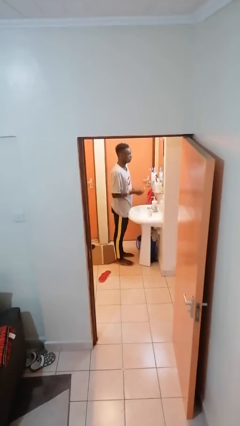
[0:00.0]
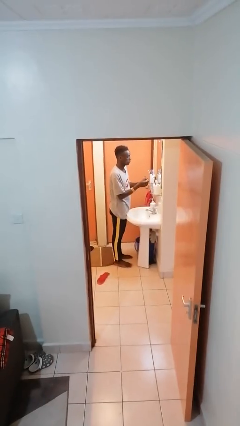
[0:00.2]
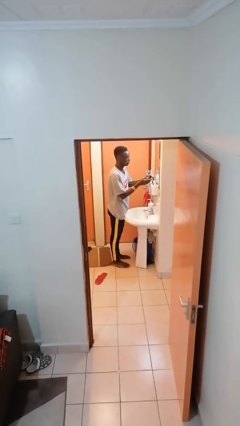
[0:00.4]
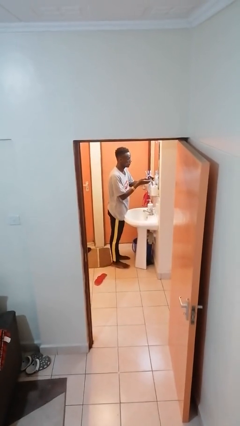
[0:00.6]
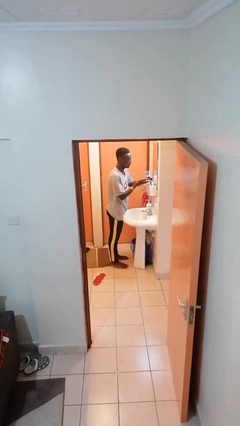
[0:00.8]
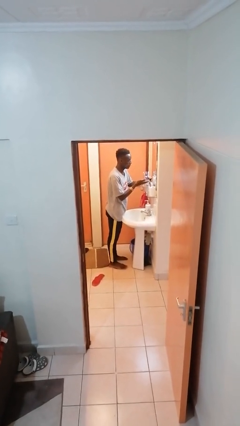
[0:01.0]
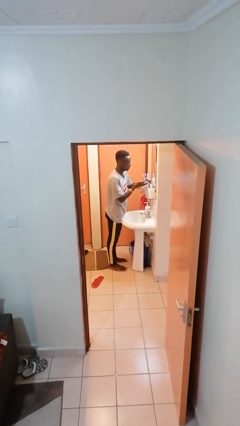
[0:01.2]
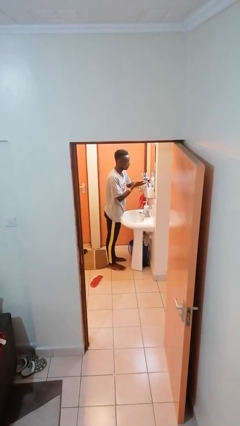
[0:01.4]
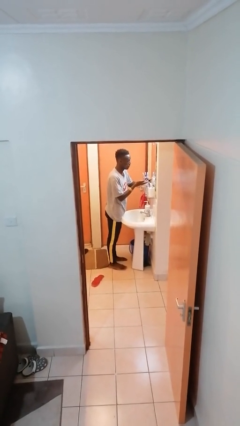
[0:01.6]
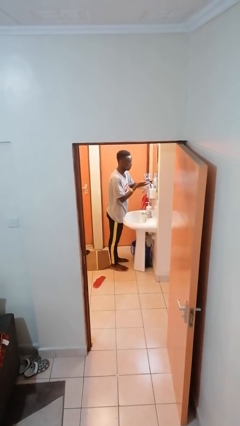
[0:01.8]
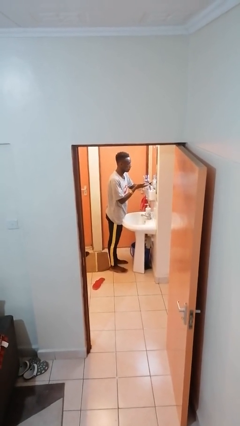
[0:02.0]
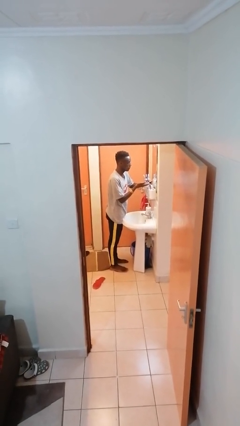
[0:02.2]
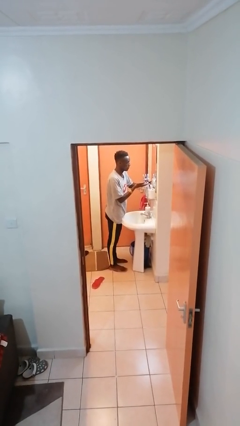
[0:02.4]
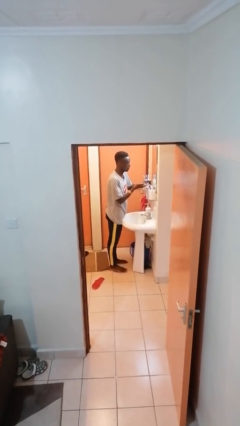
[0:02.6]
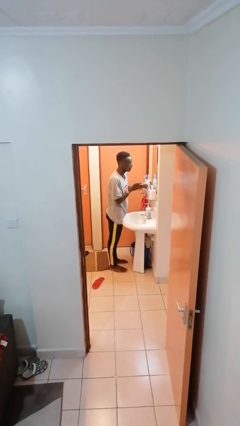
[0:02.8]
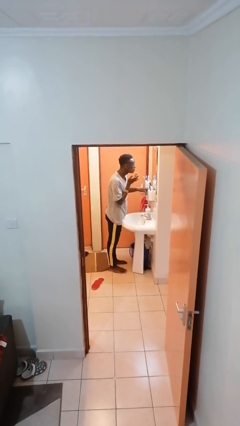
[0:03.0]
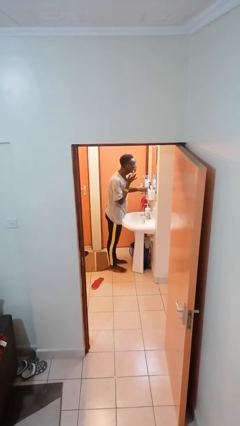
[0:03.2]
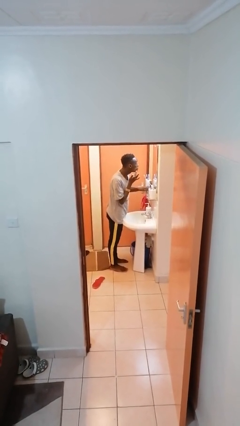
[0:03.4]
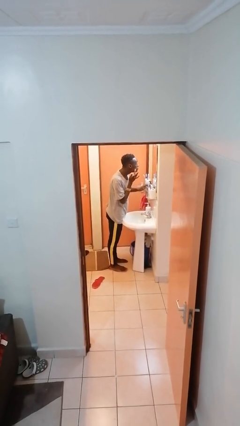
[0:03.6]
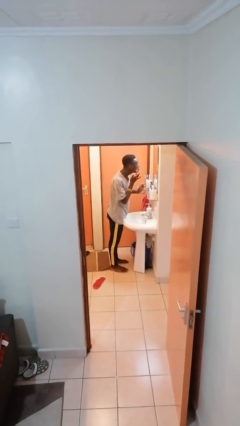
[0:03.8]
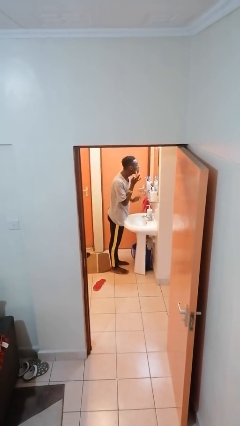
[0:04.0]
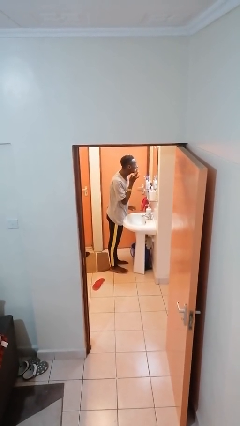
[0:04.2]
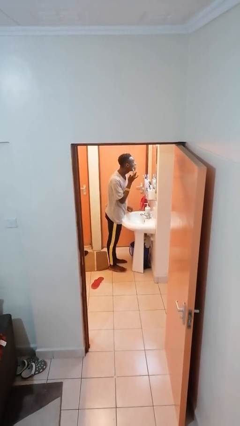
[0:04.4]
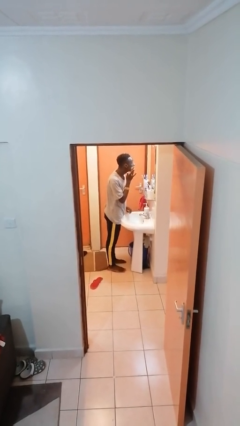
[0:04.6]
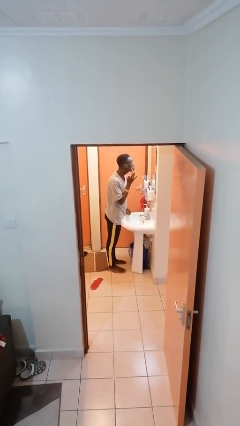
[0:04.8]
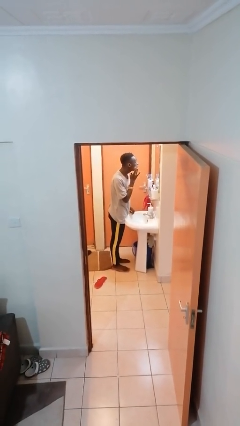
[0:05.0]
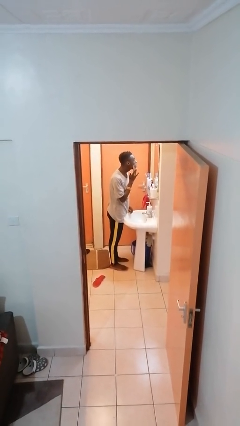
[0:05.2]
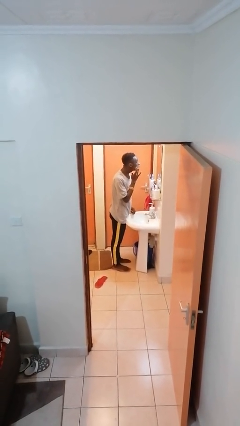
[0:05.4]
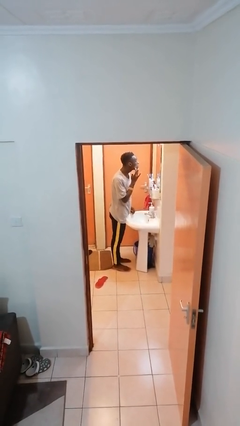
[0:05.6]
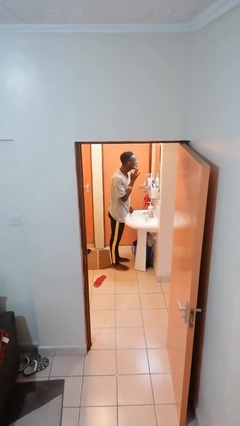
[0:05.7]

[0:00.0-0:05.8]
person applies shaving cream

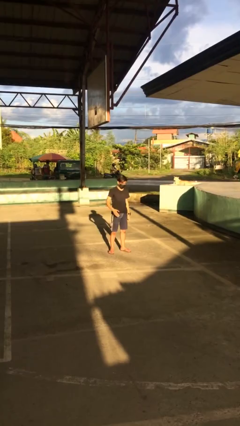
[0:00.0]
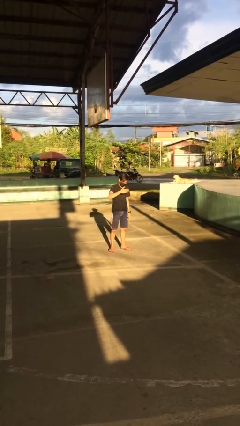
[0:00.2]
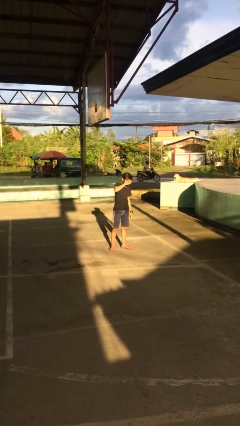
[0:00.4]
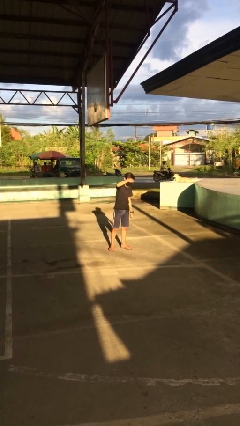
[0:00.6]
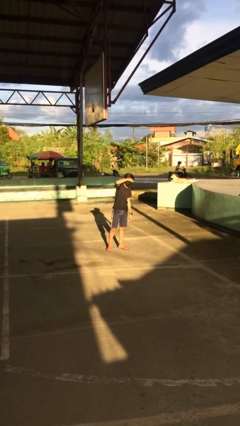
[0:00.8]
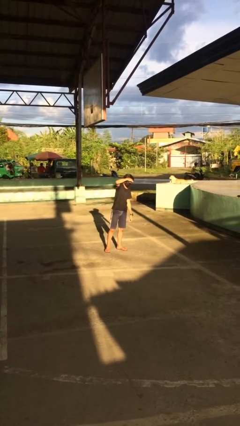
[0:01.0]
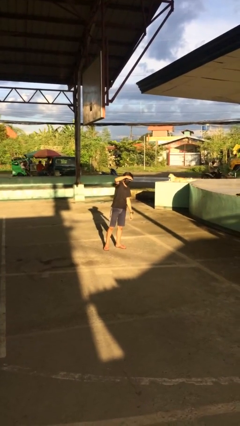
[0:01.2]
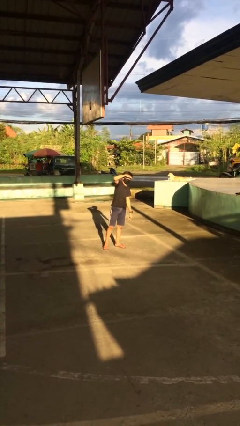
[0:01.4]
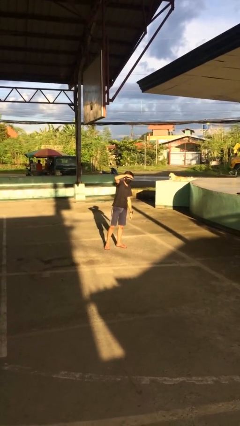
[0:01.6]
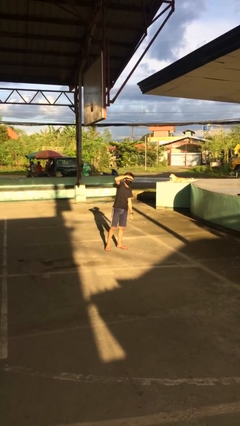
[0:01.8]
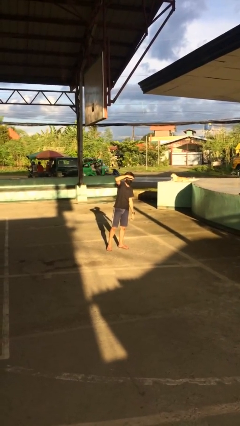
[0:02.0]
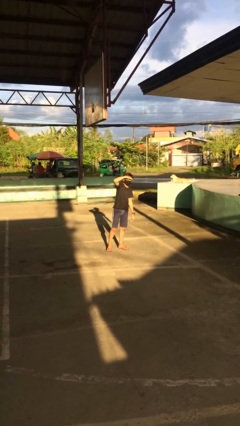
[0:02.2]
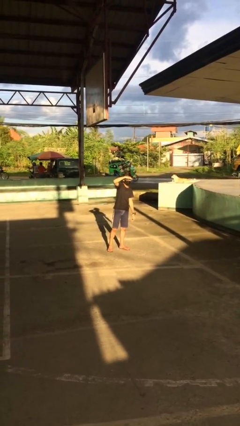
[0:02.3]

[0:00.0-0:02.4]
person shades eyes

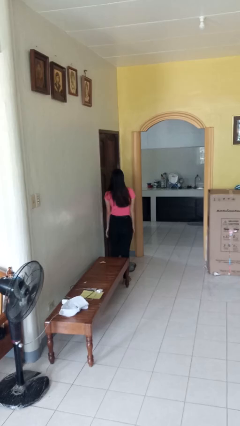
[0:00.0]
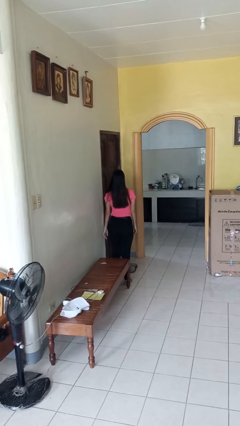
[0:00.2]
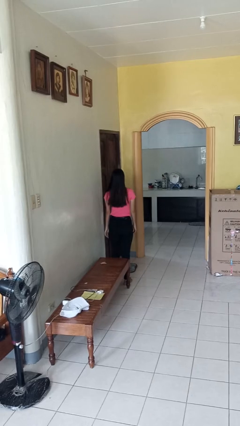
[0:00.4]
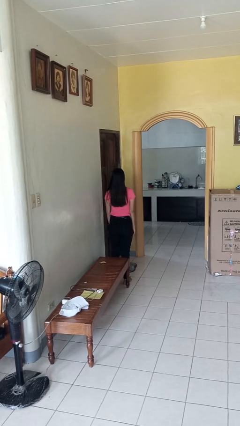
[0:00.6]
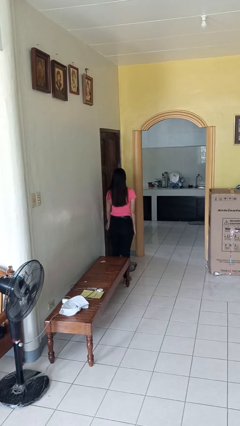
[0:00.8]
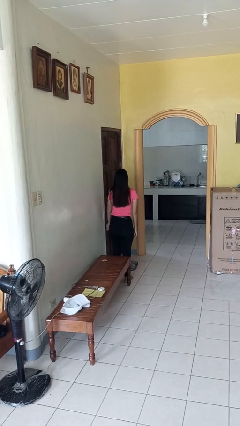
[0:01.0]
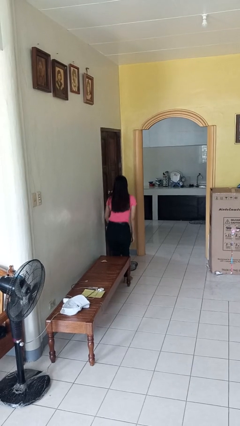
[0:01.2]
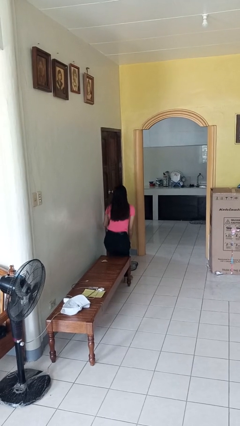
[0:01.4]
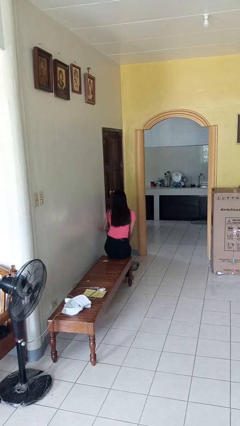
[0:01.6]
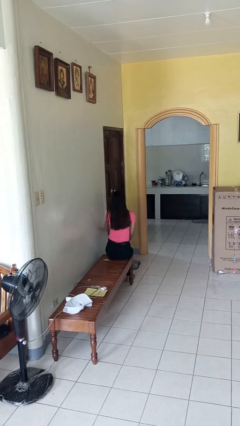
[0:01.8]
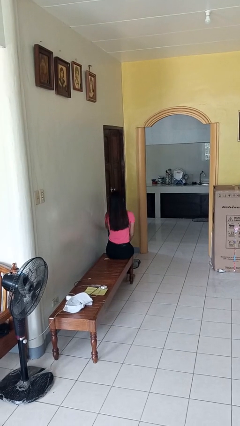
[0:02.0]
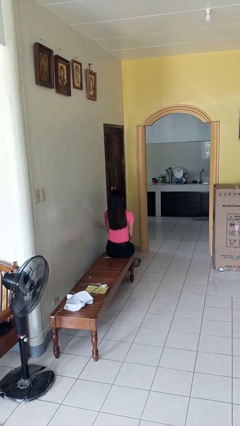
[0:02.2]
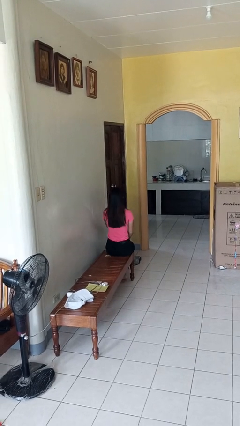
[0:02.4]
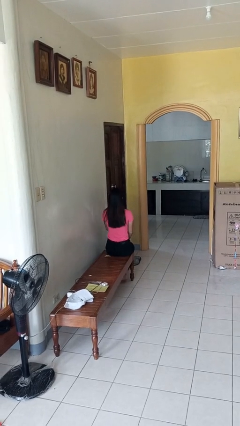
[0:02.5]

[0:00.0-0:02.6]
person sits down

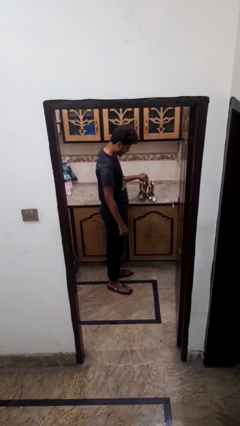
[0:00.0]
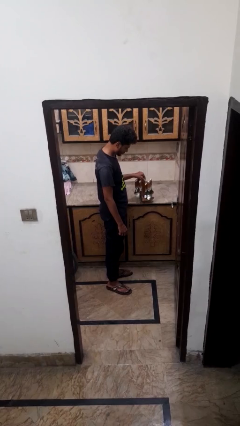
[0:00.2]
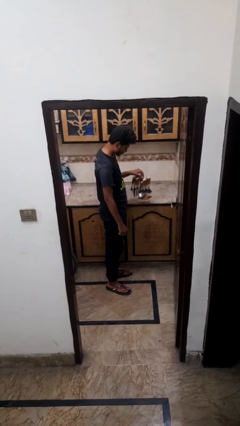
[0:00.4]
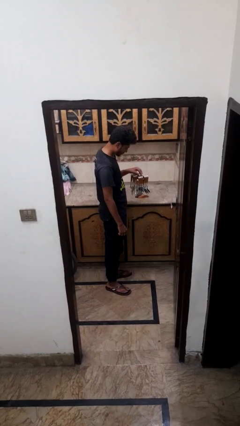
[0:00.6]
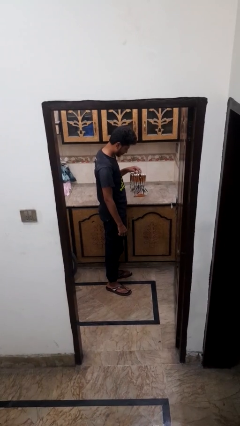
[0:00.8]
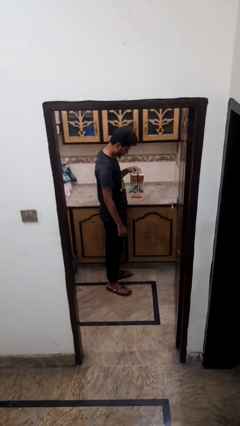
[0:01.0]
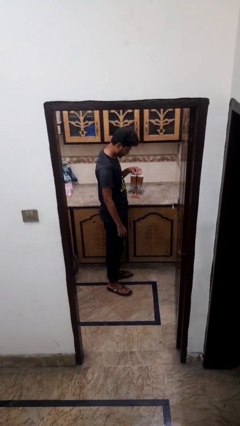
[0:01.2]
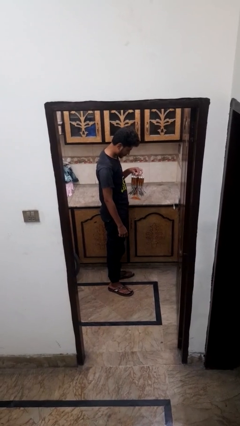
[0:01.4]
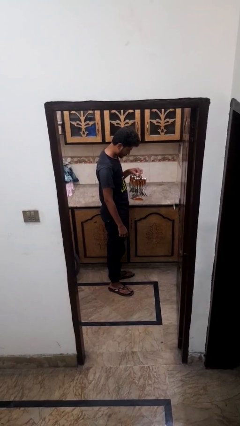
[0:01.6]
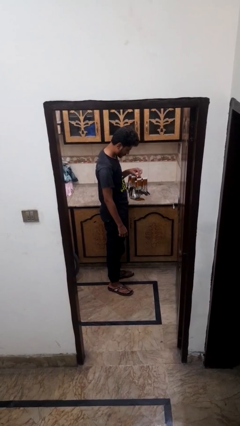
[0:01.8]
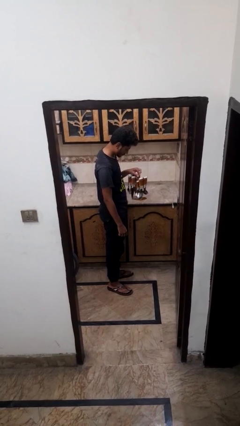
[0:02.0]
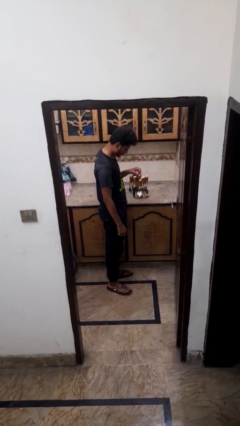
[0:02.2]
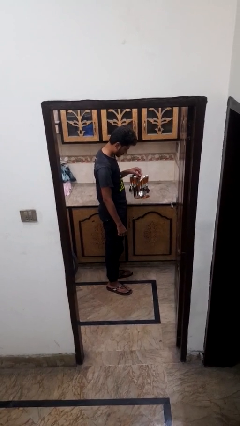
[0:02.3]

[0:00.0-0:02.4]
person picks up object from countertop

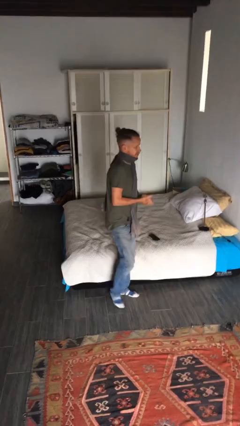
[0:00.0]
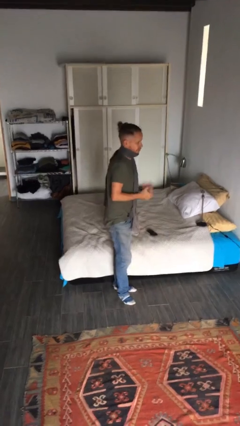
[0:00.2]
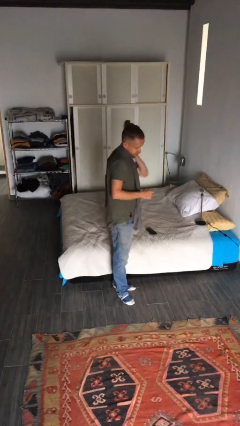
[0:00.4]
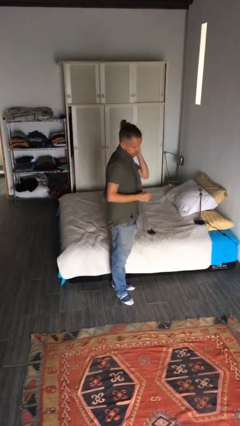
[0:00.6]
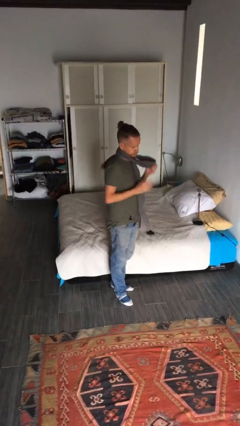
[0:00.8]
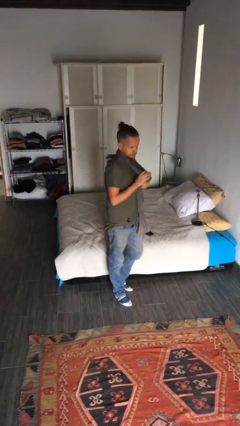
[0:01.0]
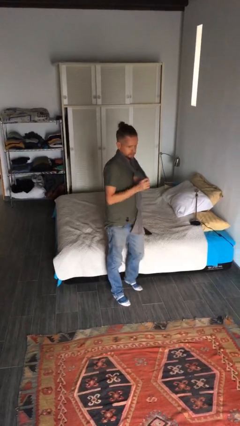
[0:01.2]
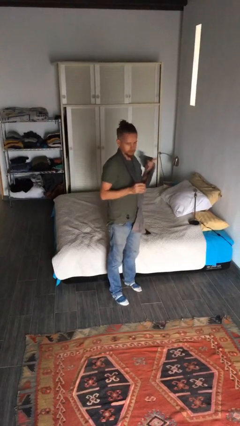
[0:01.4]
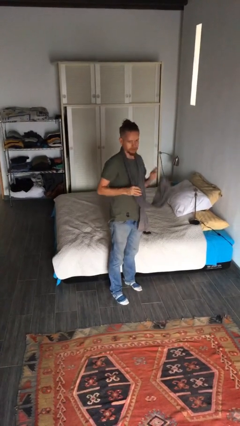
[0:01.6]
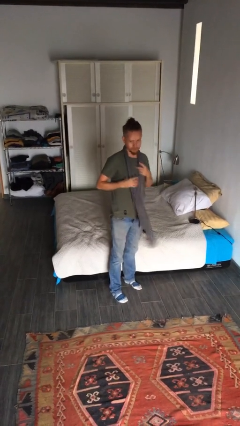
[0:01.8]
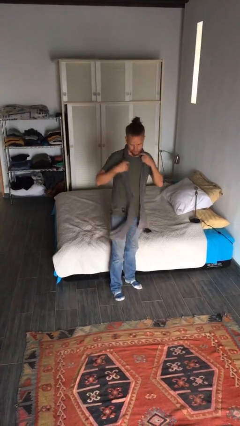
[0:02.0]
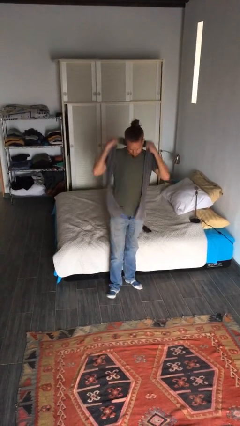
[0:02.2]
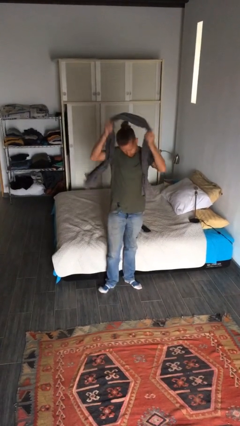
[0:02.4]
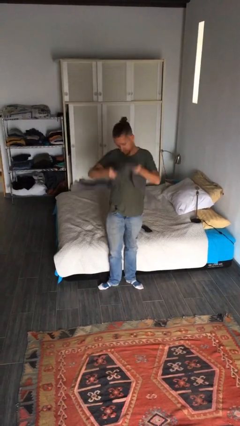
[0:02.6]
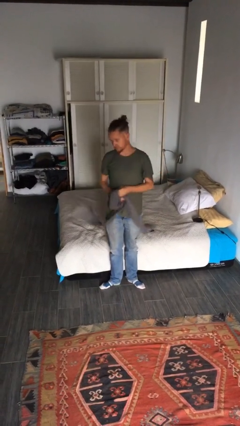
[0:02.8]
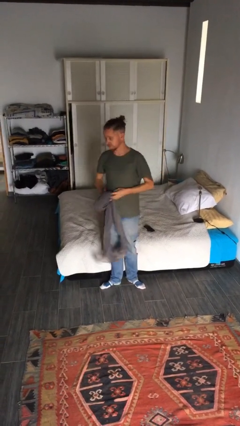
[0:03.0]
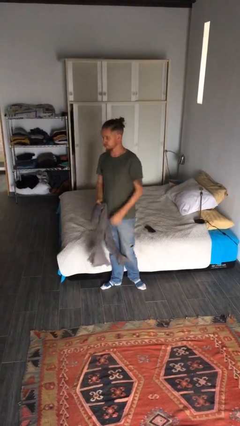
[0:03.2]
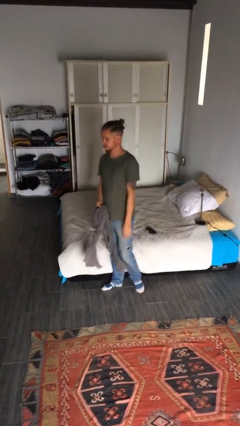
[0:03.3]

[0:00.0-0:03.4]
person takes off scarf

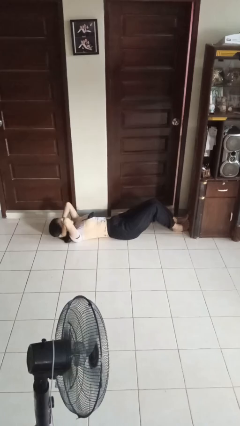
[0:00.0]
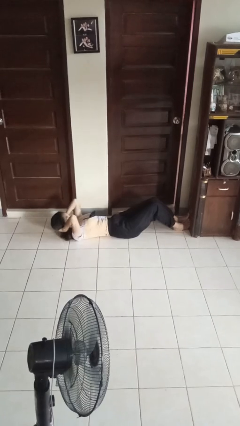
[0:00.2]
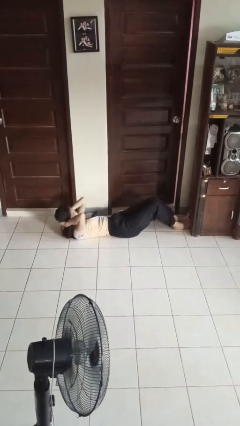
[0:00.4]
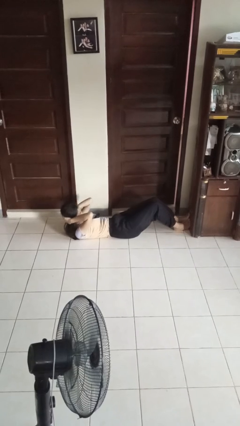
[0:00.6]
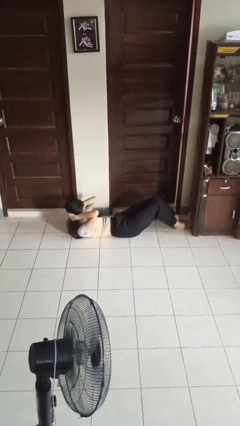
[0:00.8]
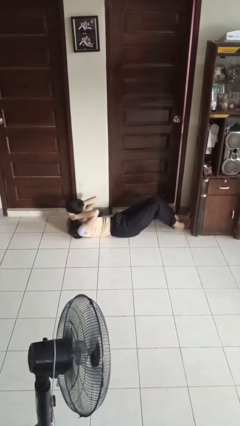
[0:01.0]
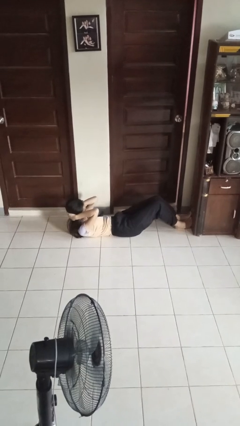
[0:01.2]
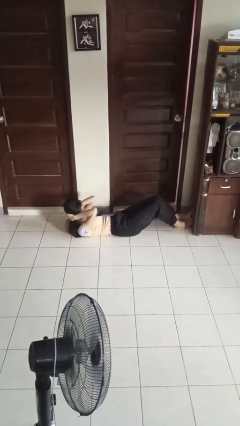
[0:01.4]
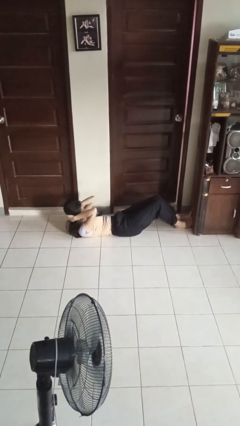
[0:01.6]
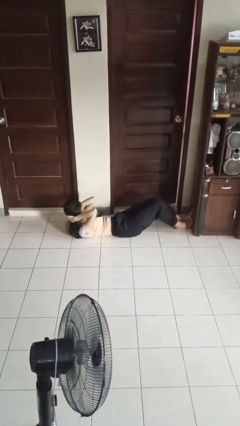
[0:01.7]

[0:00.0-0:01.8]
person exercises with situp
